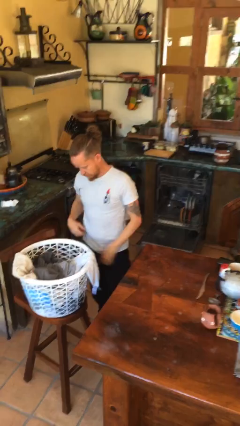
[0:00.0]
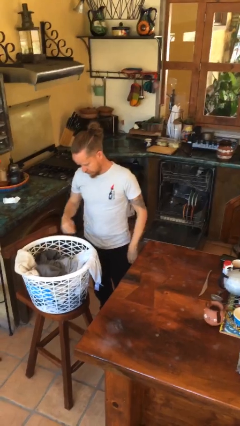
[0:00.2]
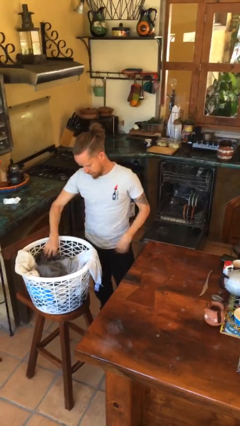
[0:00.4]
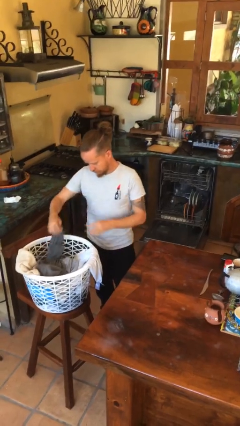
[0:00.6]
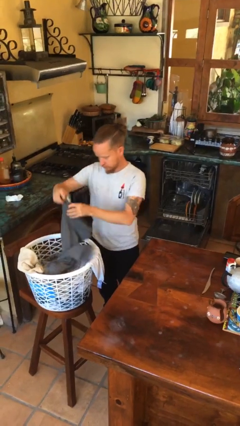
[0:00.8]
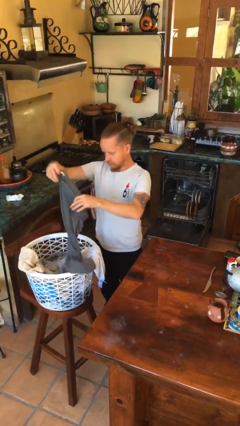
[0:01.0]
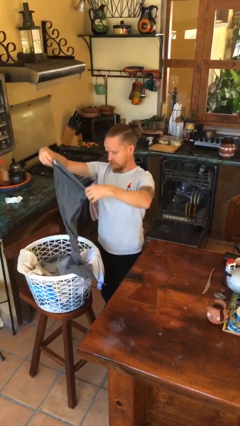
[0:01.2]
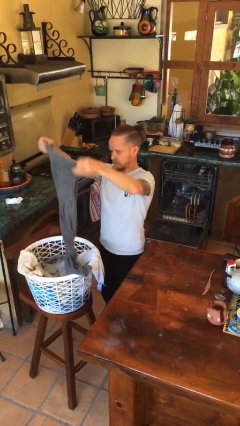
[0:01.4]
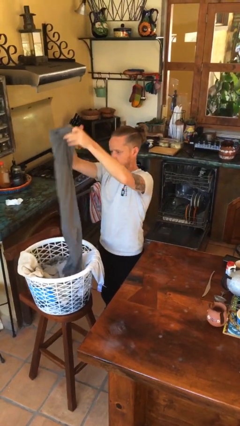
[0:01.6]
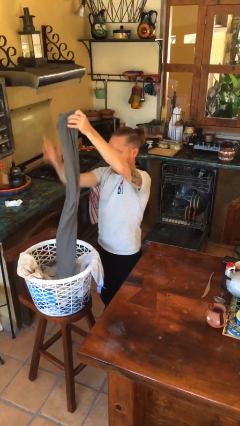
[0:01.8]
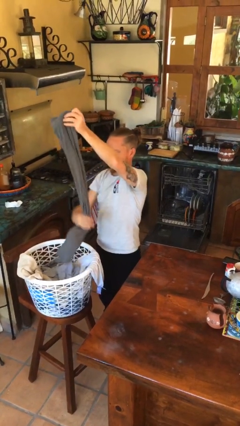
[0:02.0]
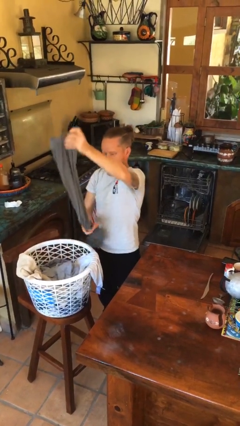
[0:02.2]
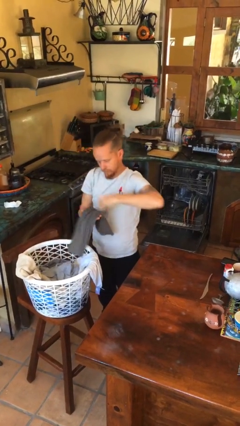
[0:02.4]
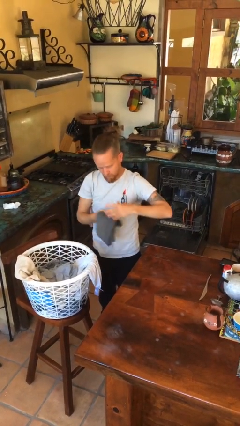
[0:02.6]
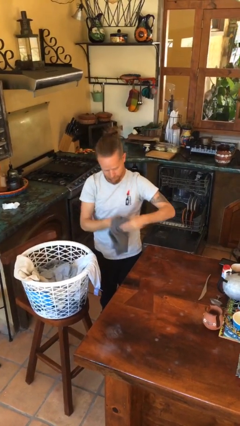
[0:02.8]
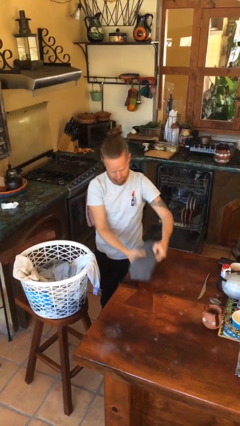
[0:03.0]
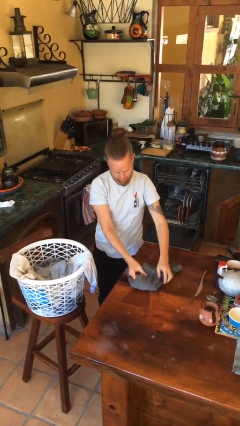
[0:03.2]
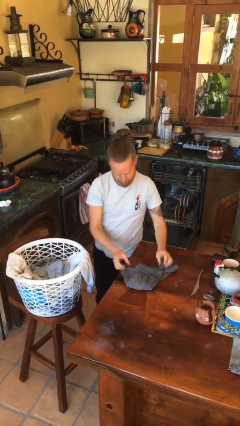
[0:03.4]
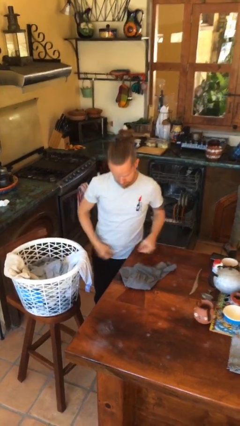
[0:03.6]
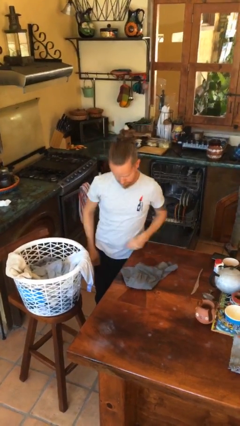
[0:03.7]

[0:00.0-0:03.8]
person folds pants

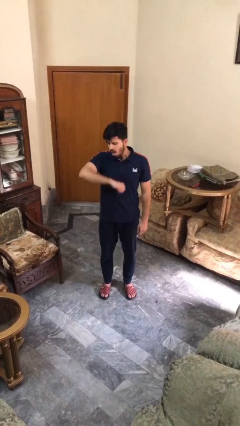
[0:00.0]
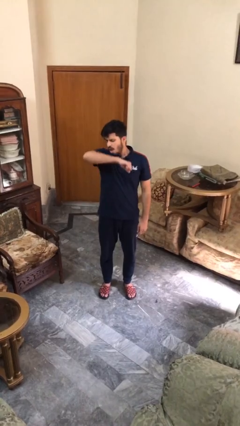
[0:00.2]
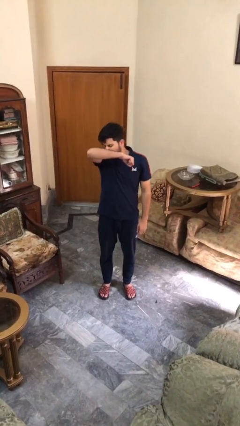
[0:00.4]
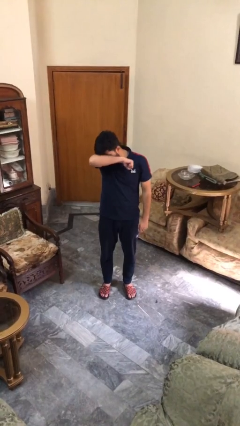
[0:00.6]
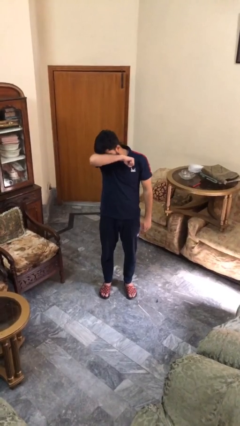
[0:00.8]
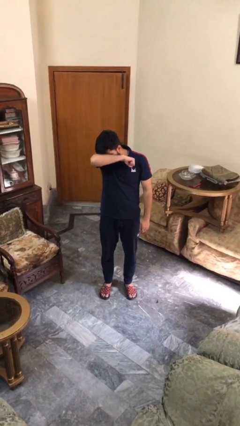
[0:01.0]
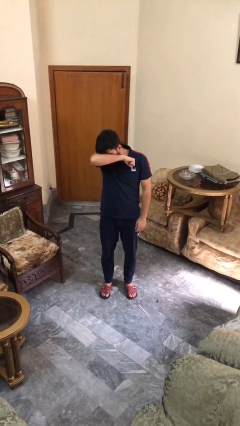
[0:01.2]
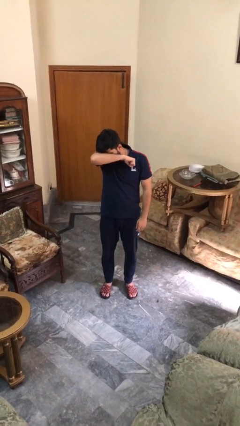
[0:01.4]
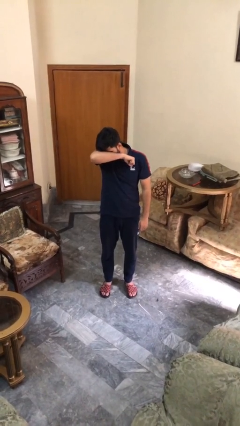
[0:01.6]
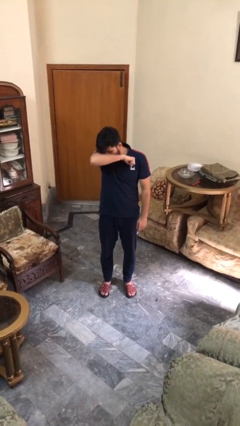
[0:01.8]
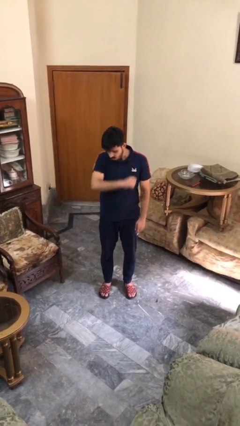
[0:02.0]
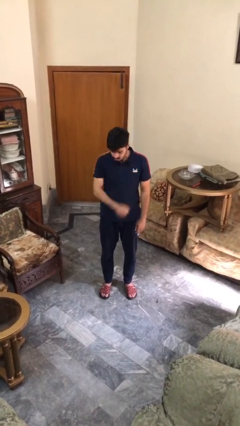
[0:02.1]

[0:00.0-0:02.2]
person sneezes into arm

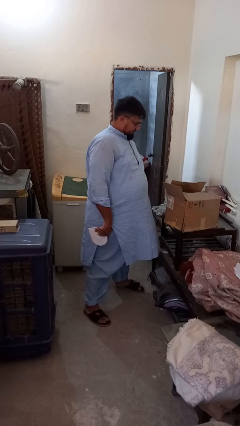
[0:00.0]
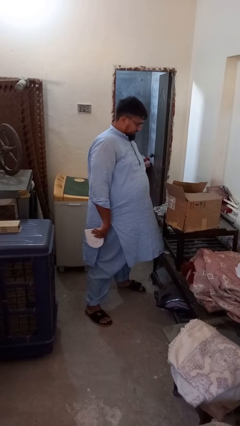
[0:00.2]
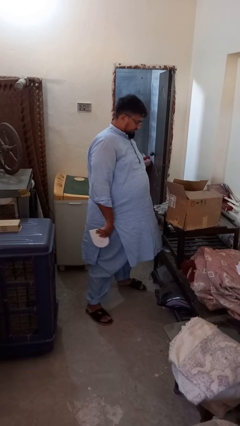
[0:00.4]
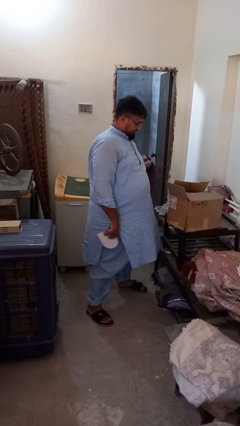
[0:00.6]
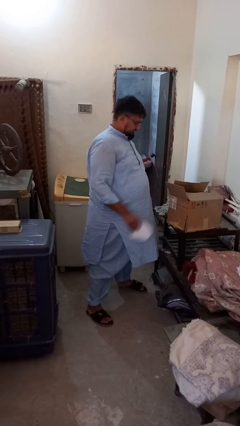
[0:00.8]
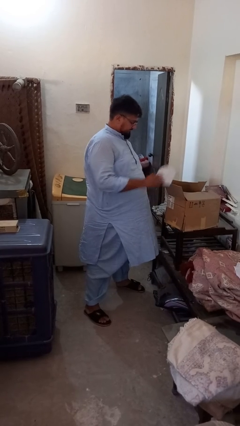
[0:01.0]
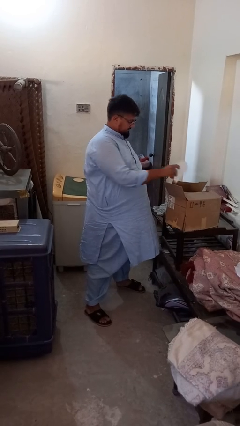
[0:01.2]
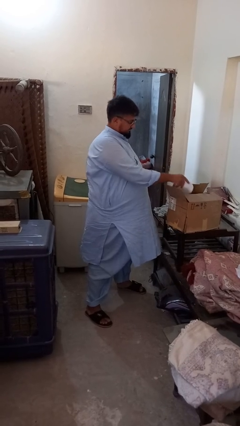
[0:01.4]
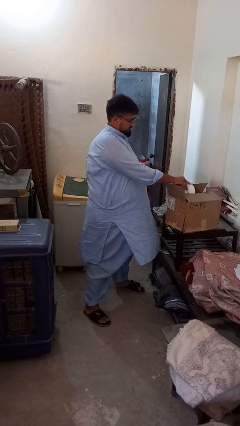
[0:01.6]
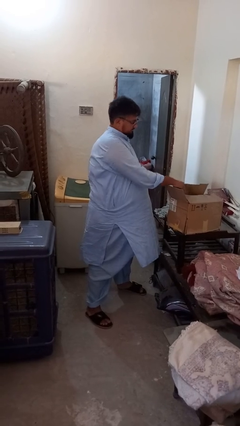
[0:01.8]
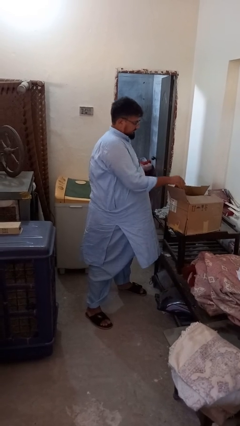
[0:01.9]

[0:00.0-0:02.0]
person puts object into box

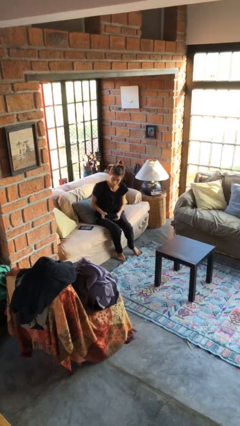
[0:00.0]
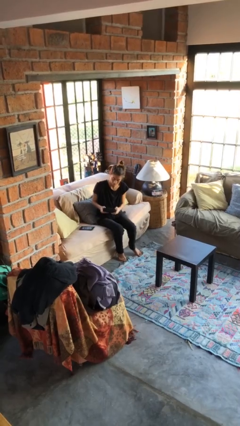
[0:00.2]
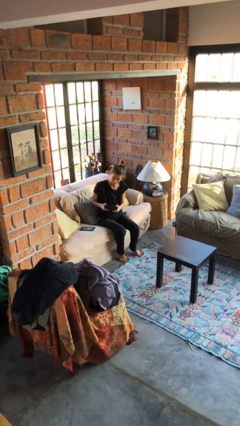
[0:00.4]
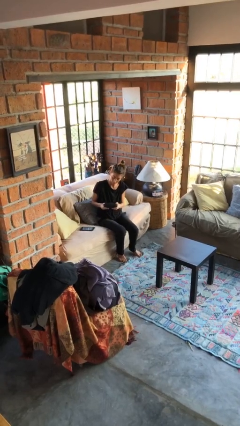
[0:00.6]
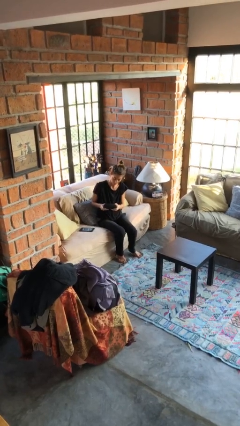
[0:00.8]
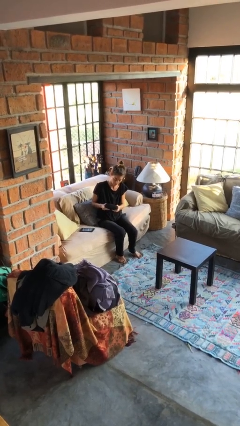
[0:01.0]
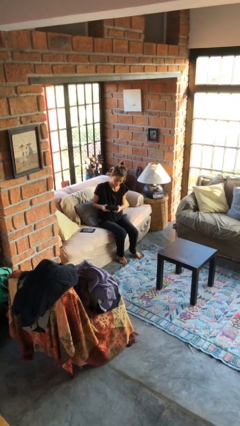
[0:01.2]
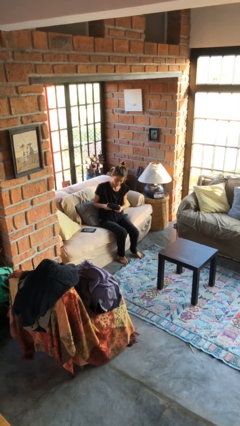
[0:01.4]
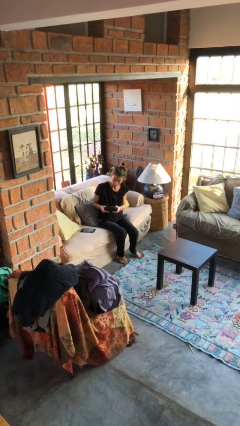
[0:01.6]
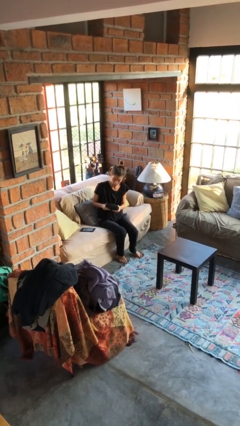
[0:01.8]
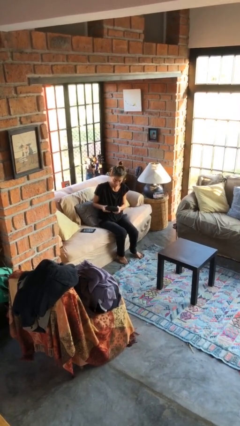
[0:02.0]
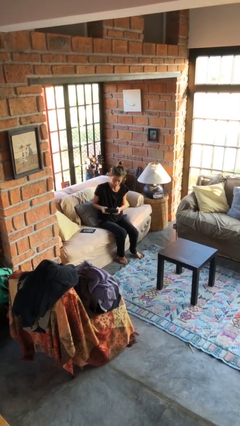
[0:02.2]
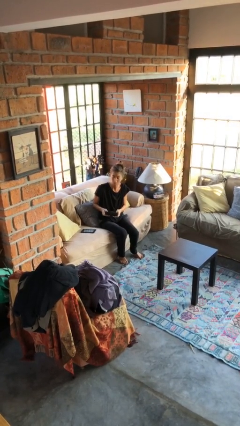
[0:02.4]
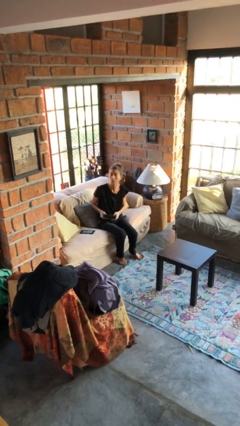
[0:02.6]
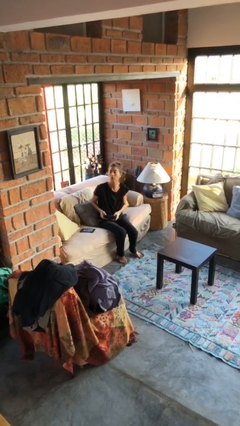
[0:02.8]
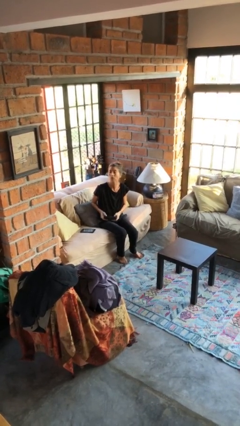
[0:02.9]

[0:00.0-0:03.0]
person interacts with handheld game

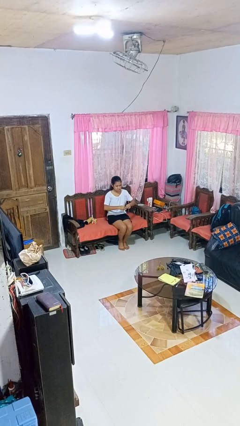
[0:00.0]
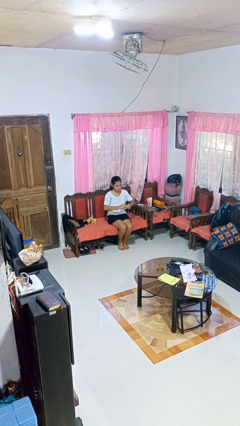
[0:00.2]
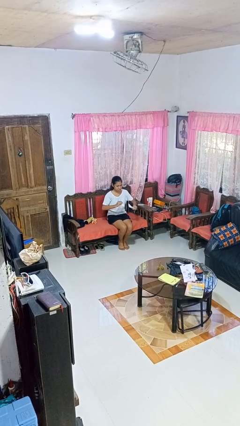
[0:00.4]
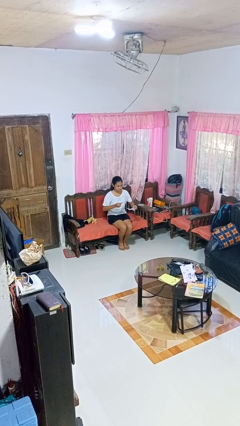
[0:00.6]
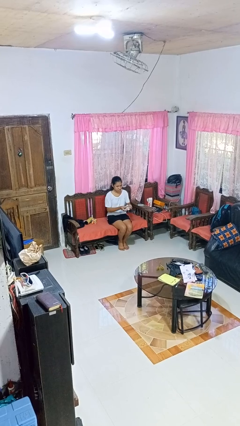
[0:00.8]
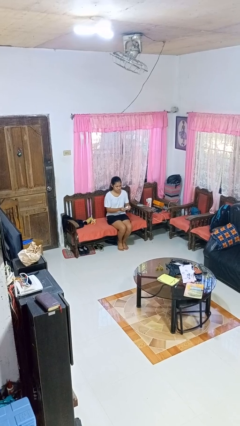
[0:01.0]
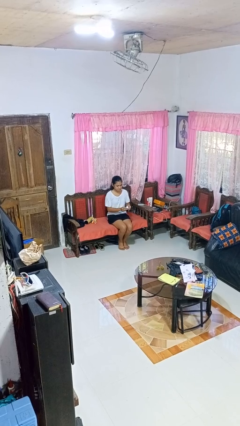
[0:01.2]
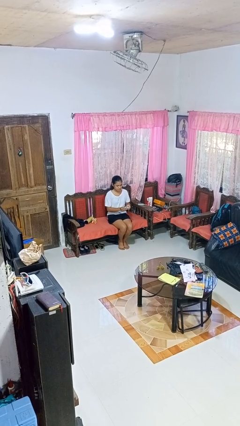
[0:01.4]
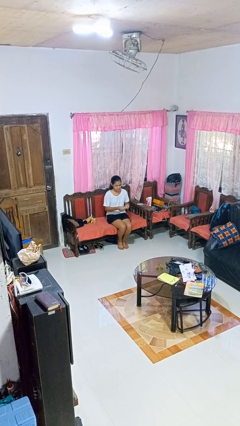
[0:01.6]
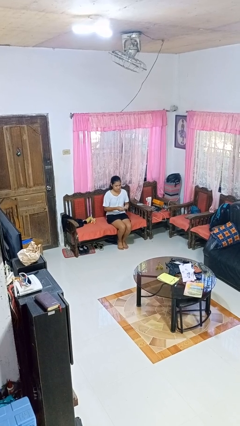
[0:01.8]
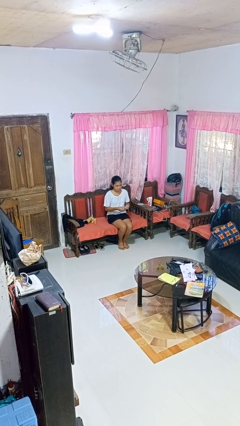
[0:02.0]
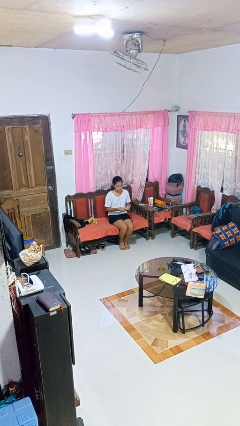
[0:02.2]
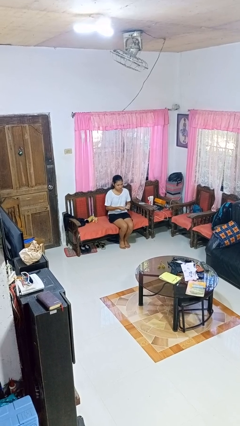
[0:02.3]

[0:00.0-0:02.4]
person tears paper

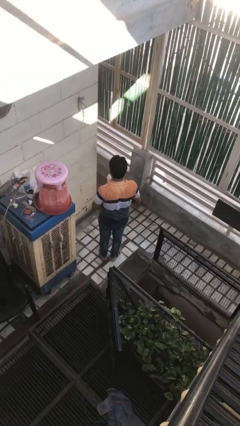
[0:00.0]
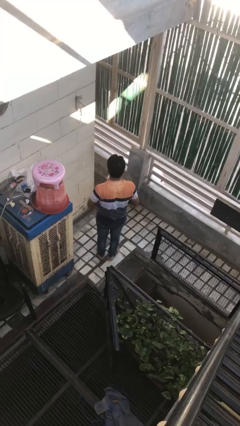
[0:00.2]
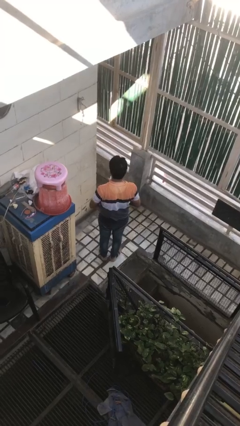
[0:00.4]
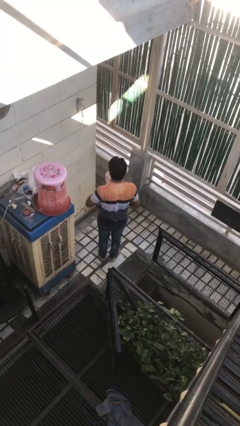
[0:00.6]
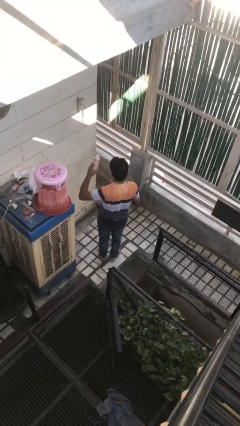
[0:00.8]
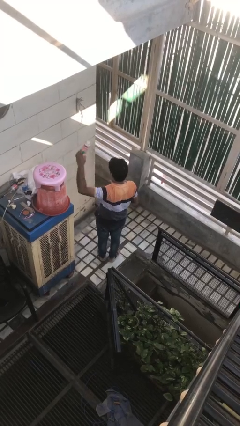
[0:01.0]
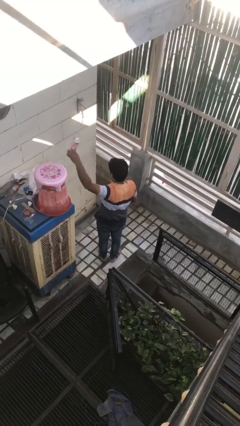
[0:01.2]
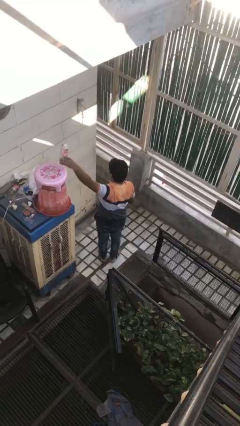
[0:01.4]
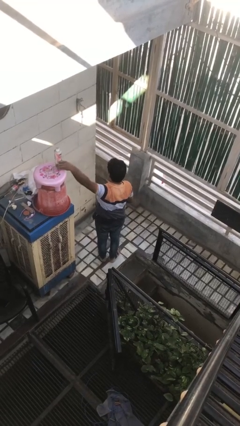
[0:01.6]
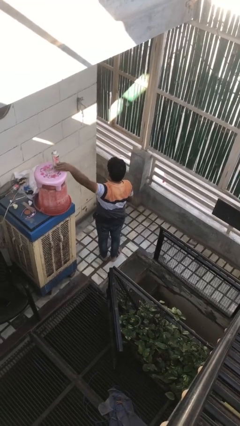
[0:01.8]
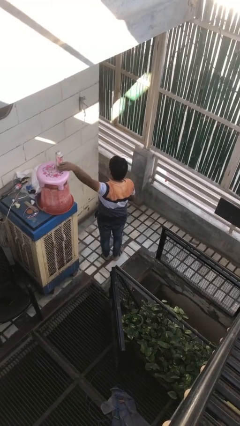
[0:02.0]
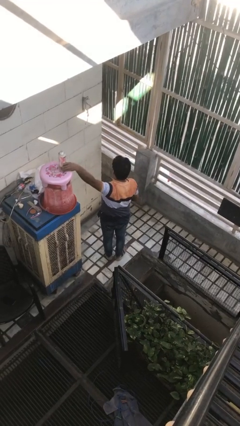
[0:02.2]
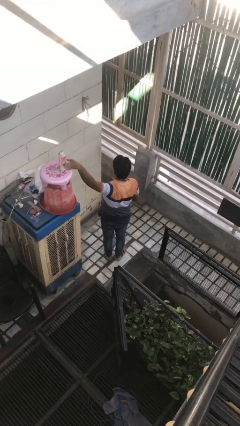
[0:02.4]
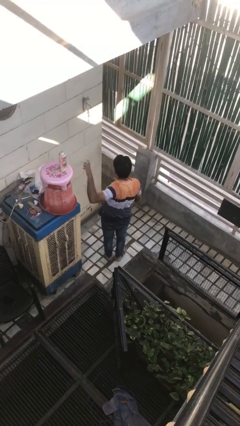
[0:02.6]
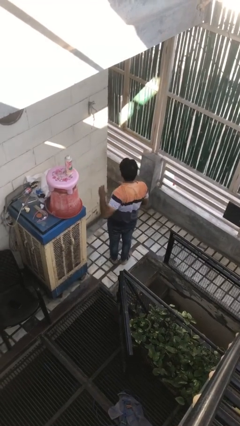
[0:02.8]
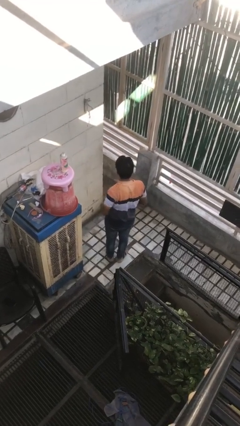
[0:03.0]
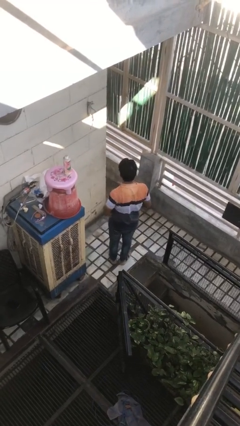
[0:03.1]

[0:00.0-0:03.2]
person puts down object on countertop

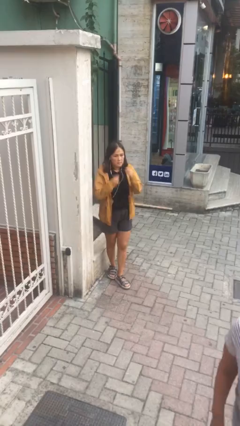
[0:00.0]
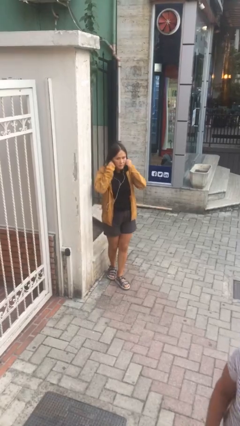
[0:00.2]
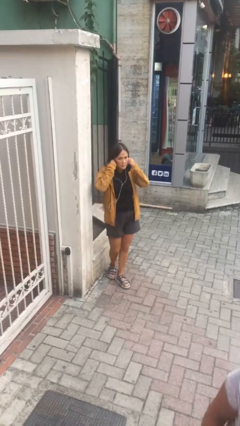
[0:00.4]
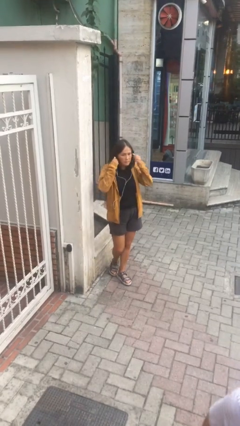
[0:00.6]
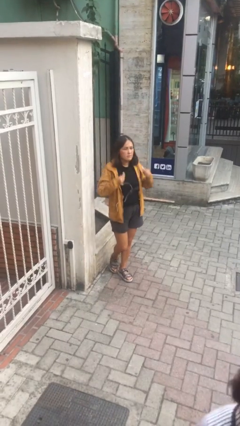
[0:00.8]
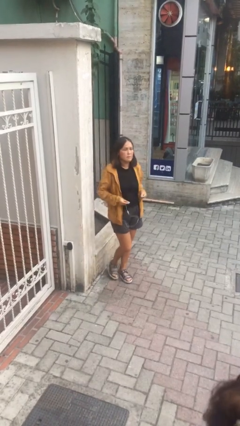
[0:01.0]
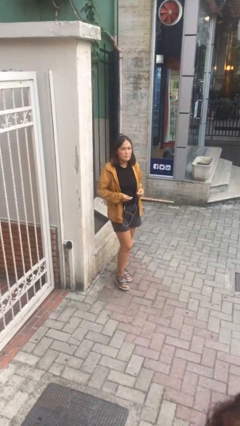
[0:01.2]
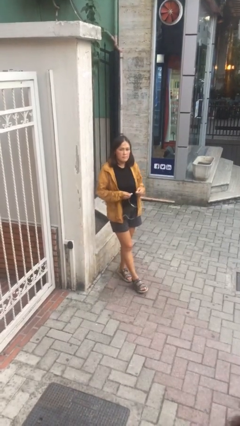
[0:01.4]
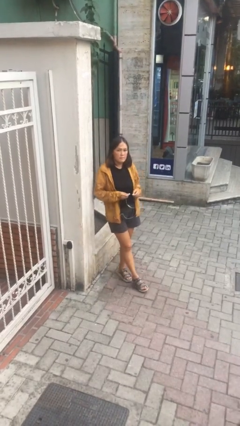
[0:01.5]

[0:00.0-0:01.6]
person takes off headphones
